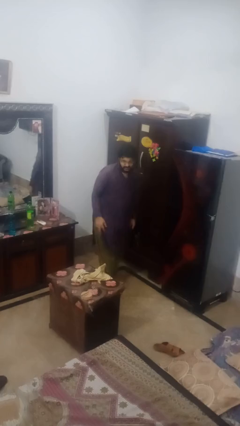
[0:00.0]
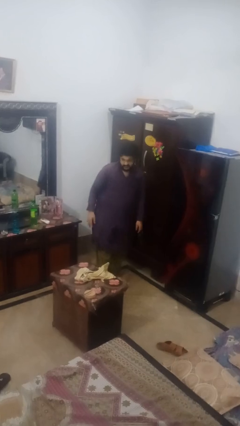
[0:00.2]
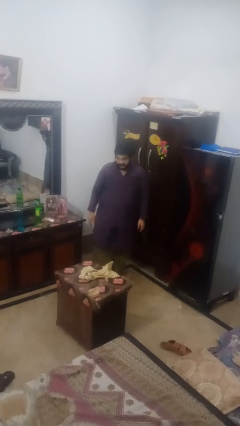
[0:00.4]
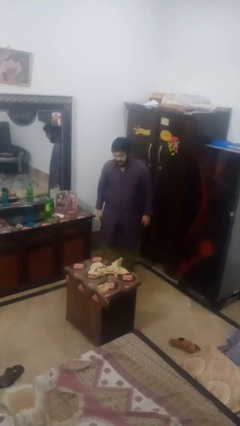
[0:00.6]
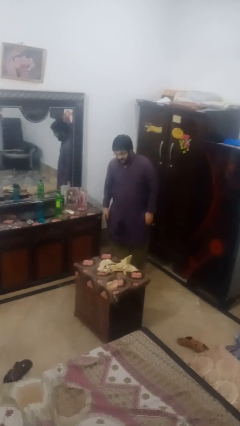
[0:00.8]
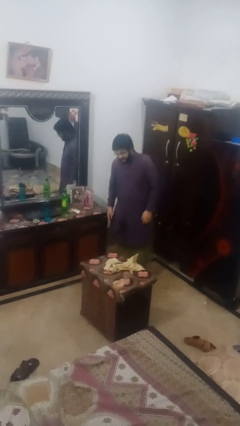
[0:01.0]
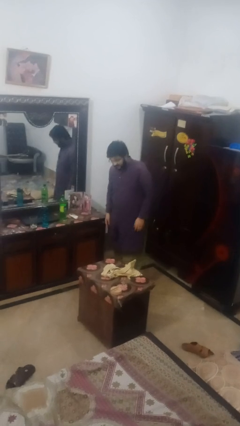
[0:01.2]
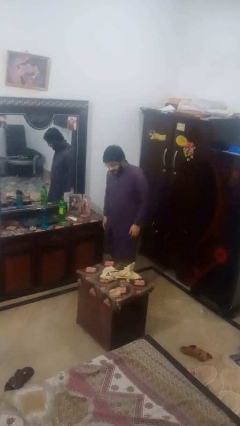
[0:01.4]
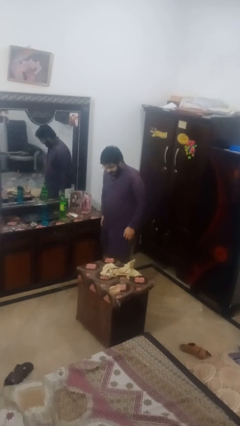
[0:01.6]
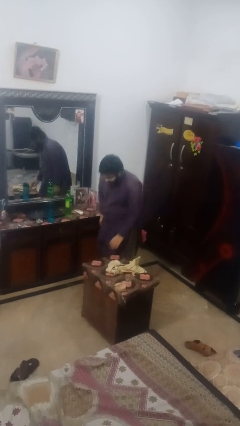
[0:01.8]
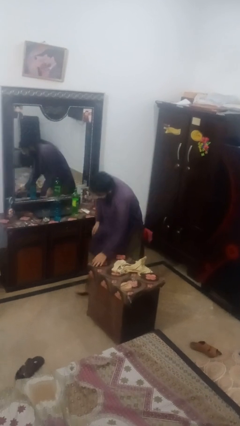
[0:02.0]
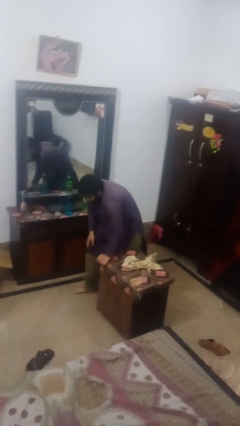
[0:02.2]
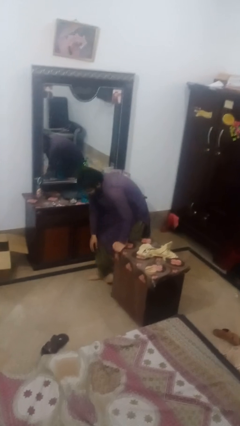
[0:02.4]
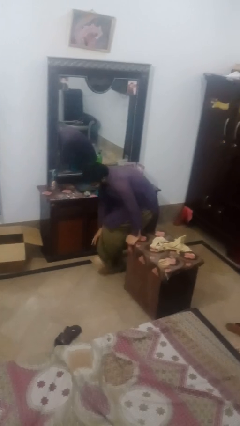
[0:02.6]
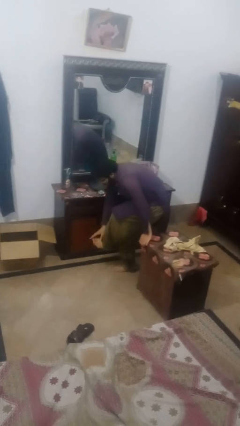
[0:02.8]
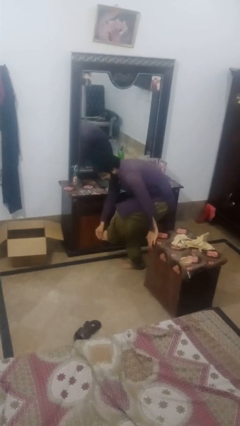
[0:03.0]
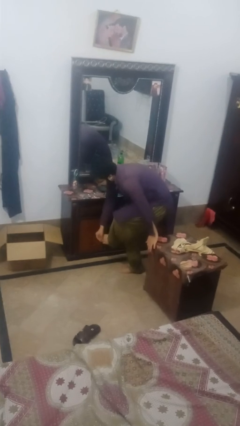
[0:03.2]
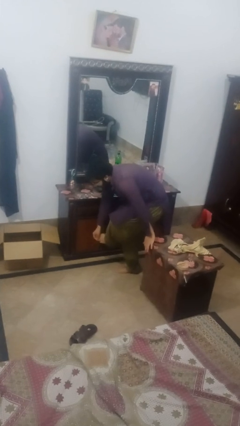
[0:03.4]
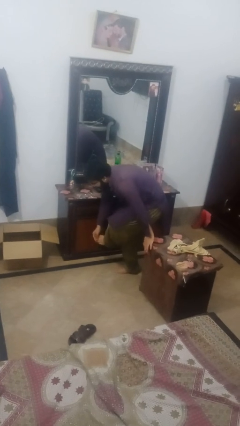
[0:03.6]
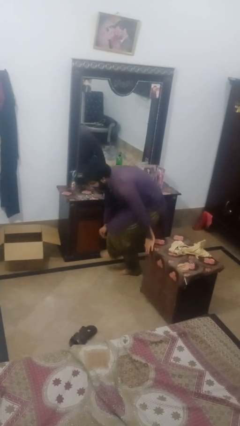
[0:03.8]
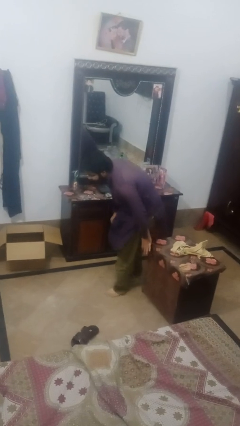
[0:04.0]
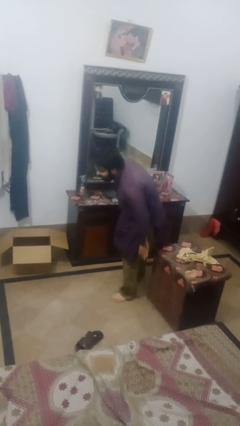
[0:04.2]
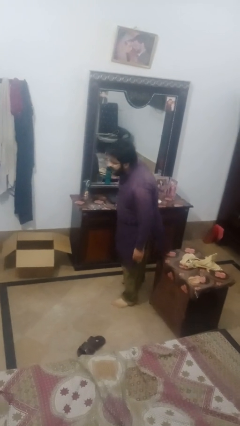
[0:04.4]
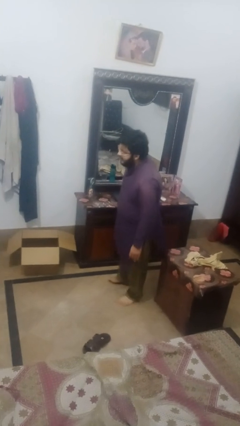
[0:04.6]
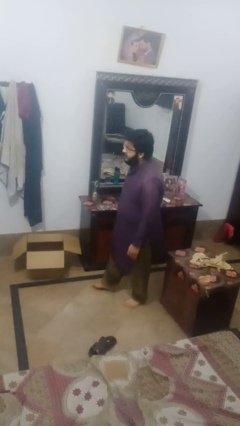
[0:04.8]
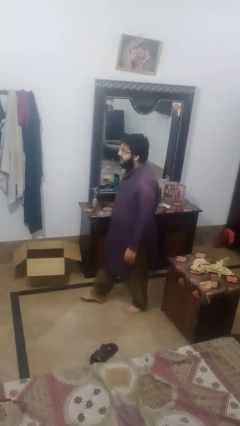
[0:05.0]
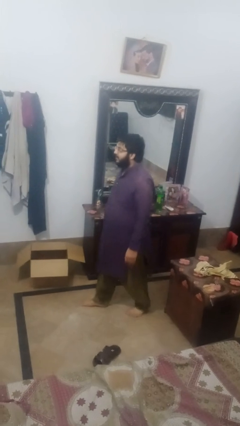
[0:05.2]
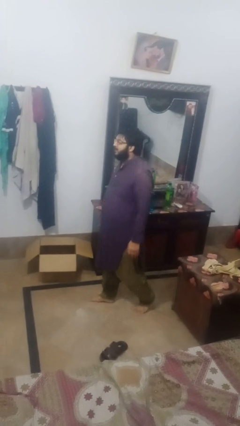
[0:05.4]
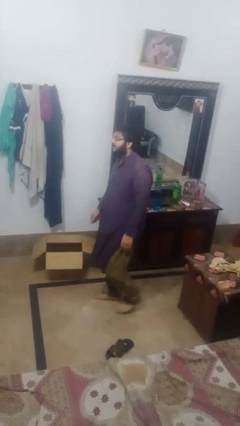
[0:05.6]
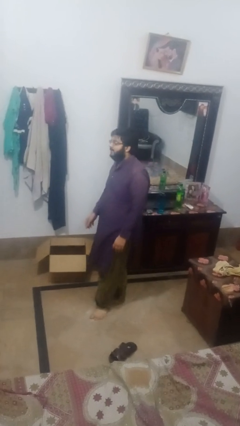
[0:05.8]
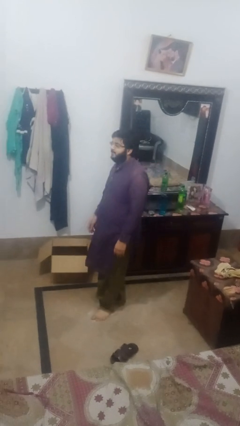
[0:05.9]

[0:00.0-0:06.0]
person bumps into table

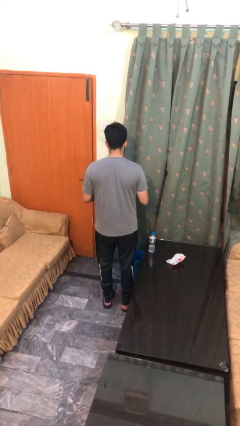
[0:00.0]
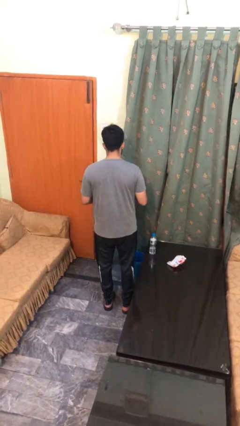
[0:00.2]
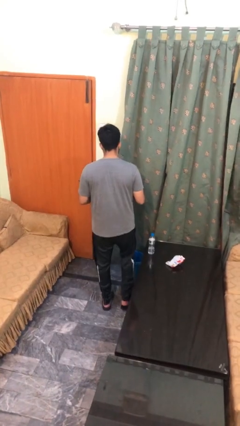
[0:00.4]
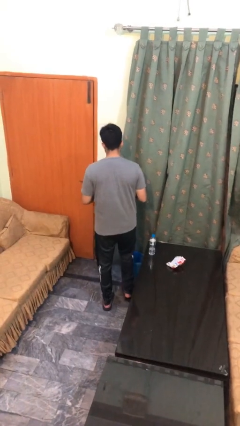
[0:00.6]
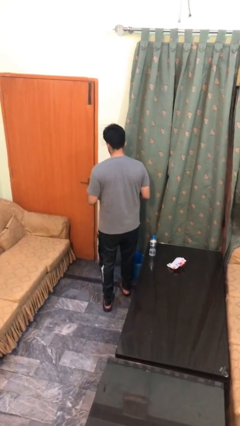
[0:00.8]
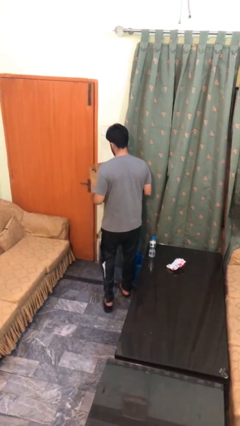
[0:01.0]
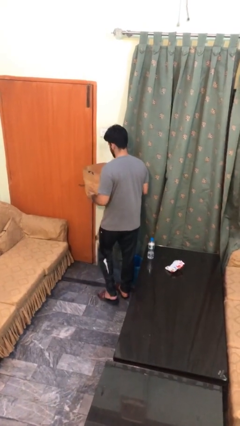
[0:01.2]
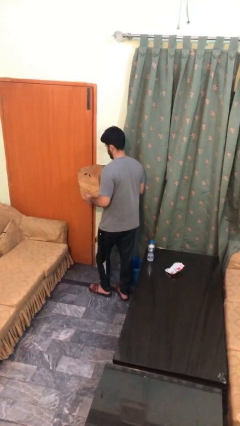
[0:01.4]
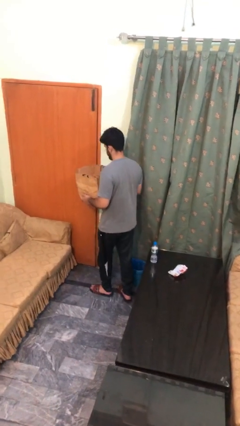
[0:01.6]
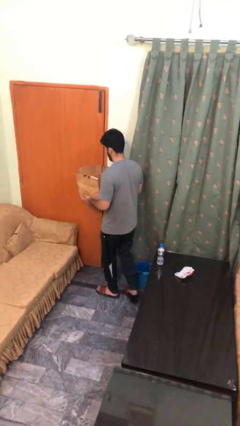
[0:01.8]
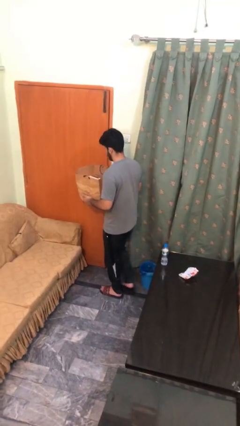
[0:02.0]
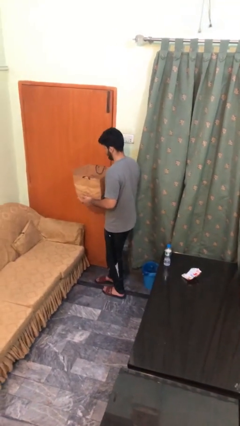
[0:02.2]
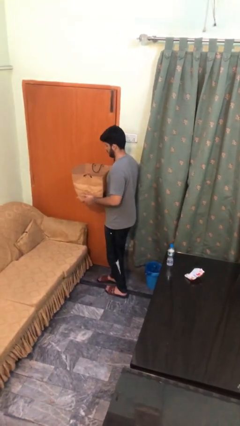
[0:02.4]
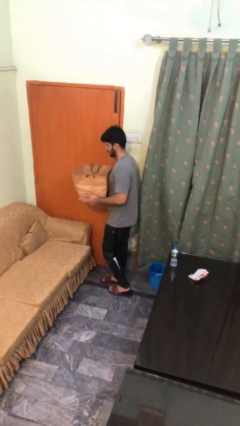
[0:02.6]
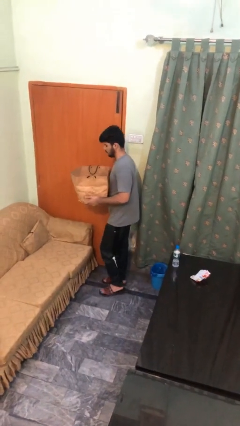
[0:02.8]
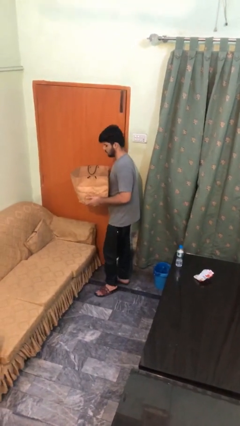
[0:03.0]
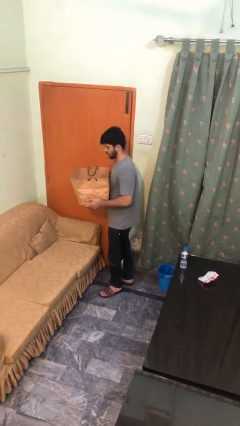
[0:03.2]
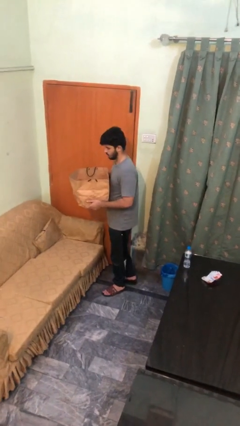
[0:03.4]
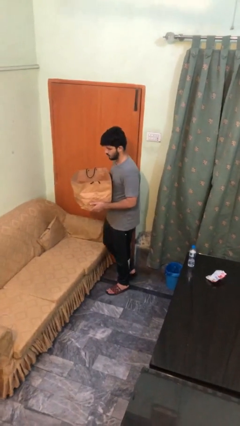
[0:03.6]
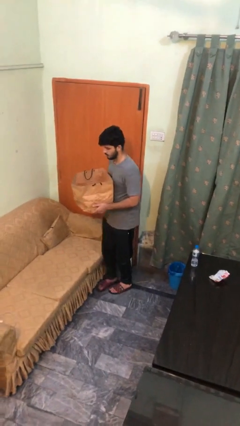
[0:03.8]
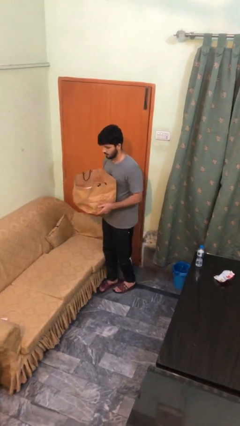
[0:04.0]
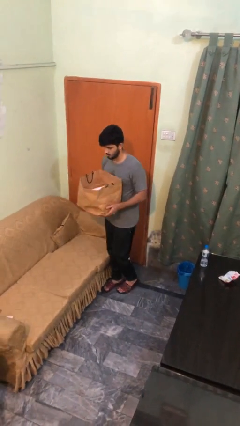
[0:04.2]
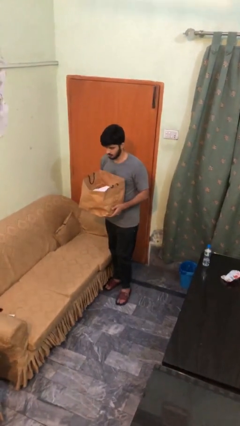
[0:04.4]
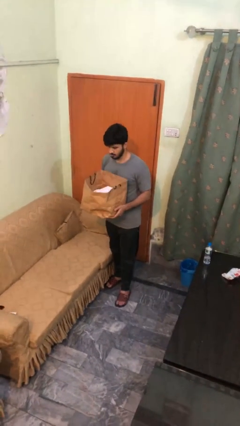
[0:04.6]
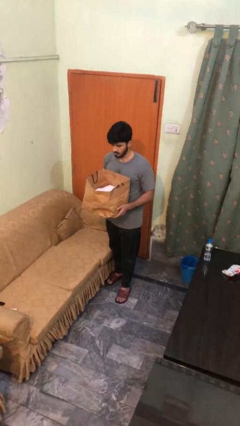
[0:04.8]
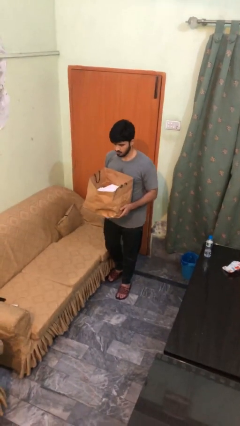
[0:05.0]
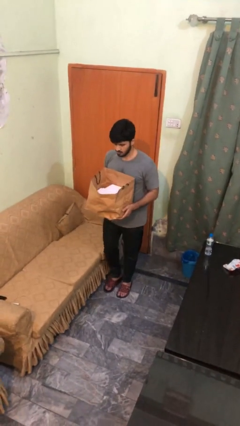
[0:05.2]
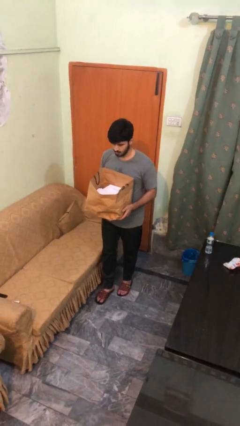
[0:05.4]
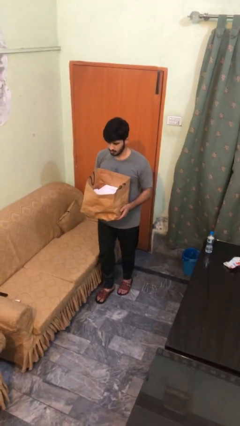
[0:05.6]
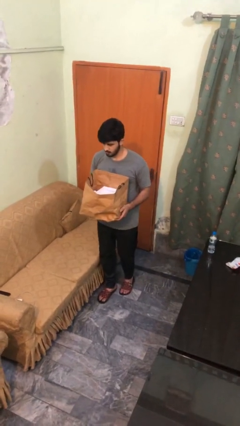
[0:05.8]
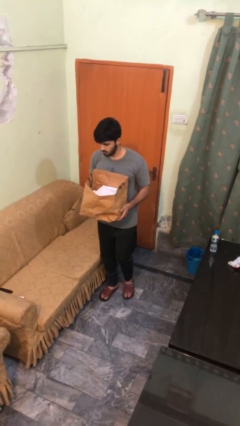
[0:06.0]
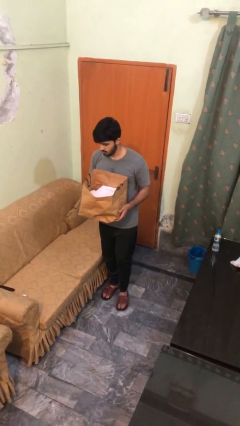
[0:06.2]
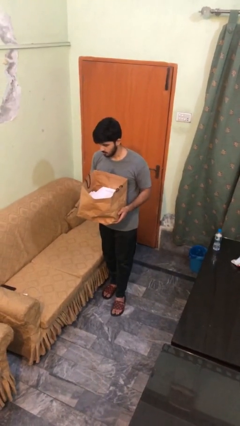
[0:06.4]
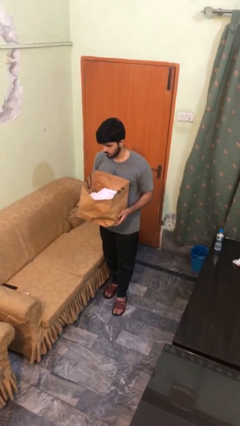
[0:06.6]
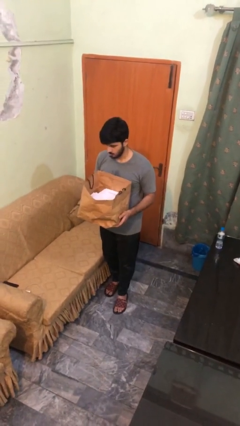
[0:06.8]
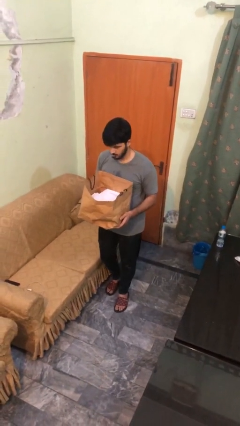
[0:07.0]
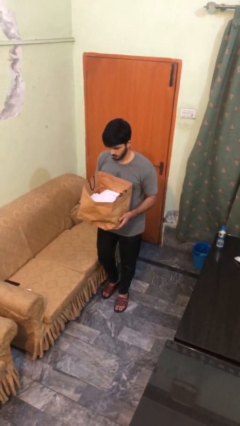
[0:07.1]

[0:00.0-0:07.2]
person carries groceries

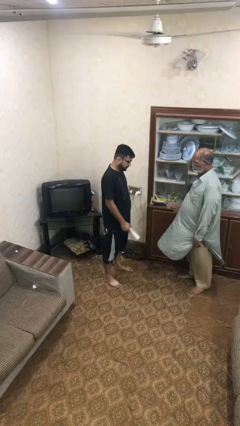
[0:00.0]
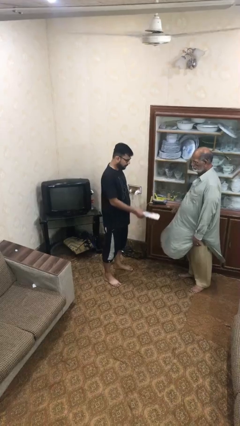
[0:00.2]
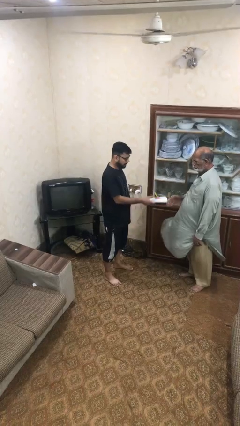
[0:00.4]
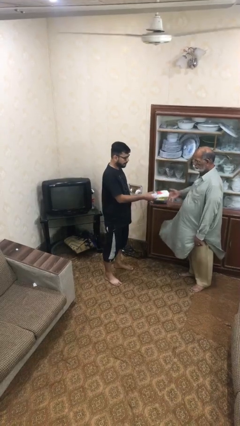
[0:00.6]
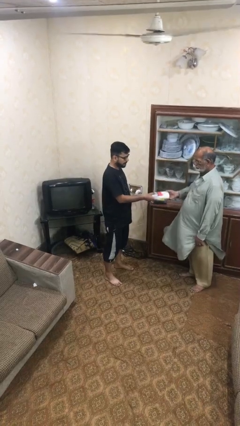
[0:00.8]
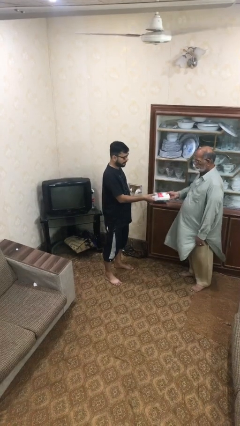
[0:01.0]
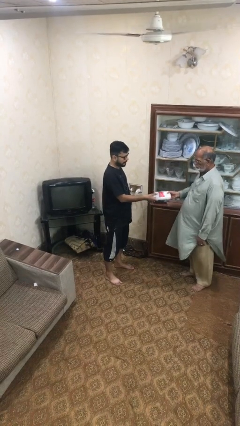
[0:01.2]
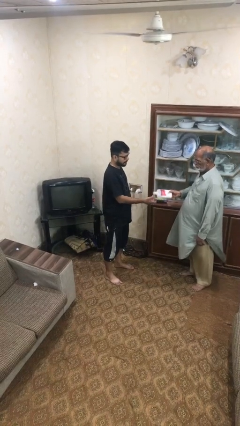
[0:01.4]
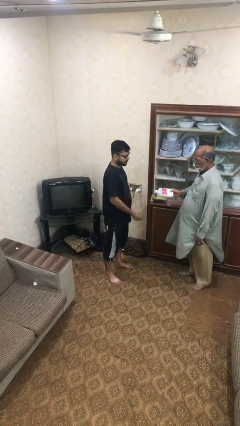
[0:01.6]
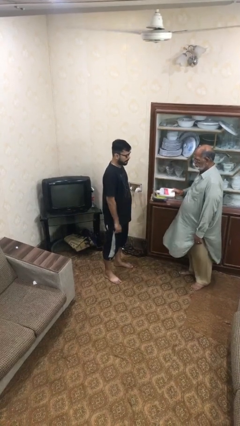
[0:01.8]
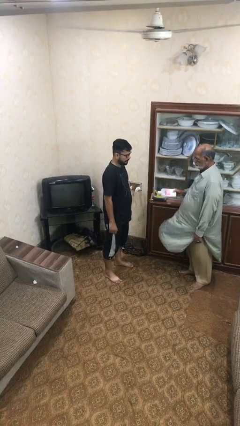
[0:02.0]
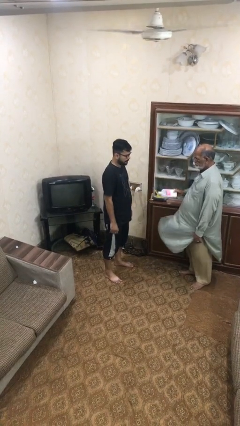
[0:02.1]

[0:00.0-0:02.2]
person transfers object to person

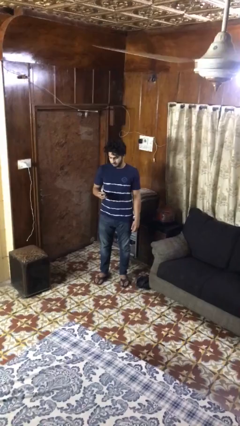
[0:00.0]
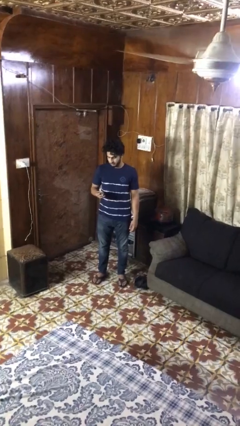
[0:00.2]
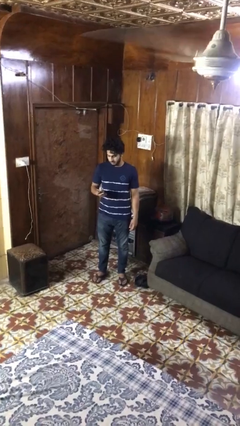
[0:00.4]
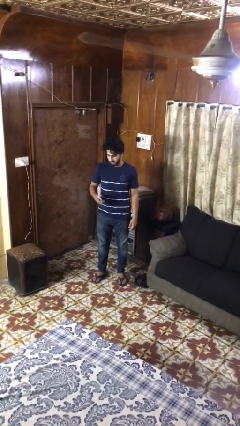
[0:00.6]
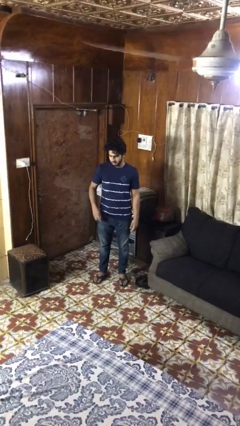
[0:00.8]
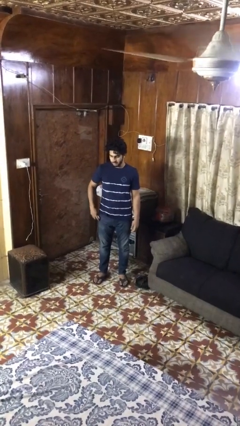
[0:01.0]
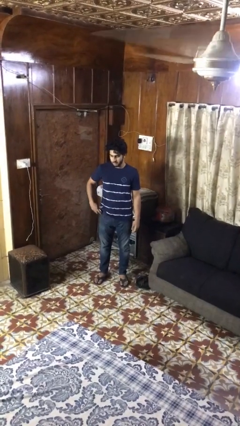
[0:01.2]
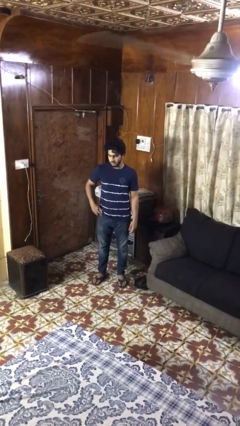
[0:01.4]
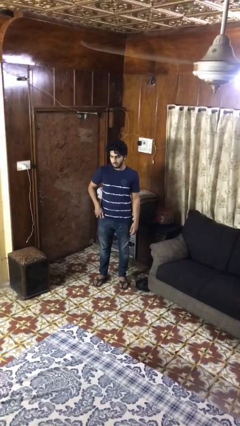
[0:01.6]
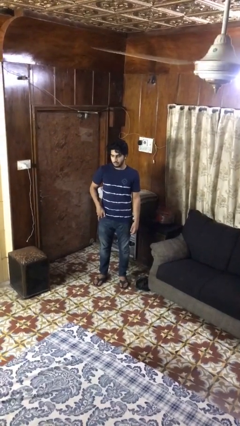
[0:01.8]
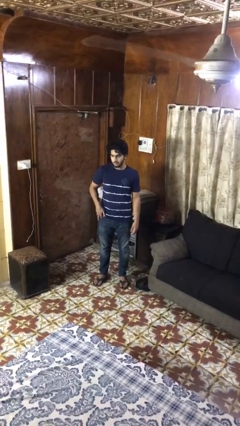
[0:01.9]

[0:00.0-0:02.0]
person puts phone into pocket

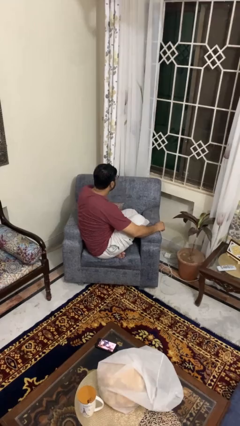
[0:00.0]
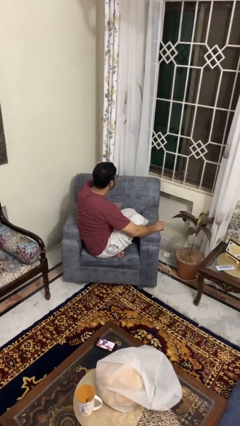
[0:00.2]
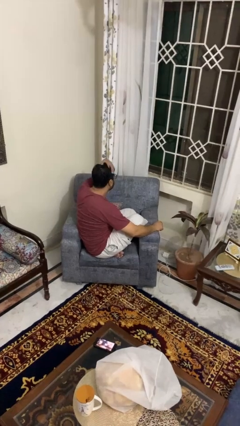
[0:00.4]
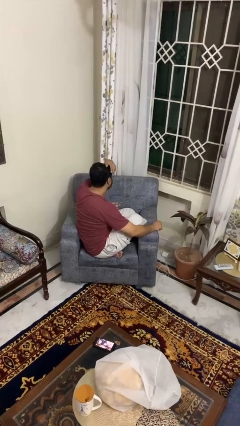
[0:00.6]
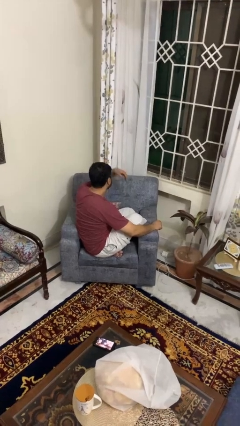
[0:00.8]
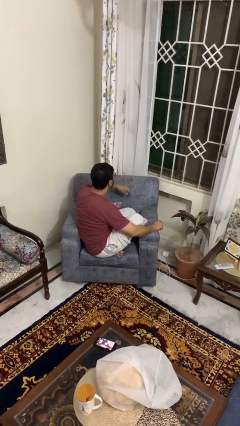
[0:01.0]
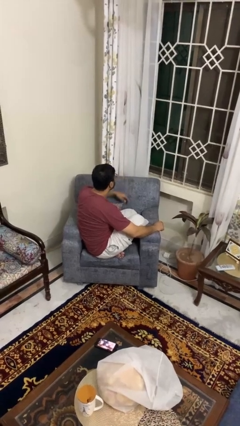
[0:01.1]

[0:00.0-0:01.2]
person strokes hair
